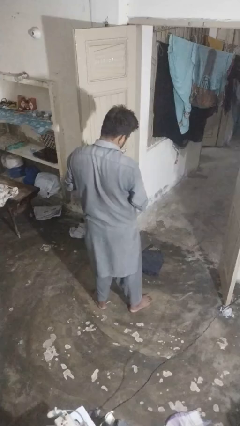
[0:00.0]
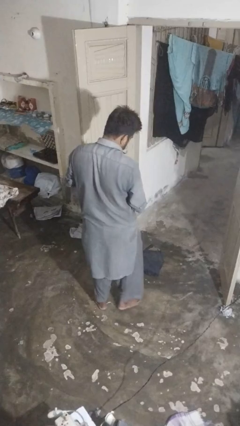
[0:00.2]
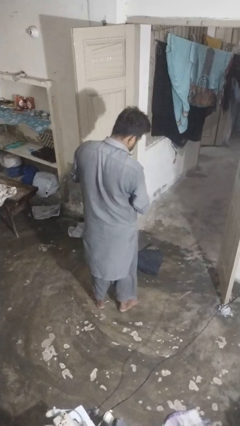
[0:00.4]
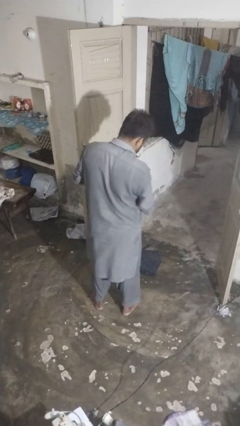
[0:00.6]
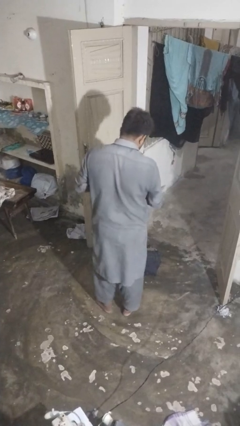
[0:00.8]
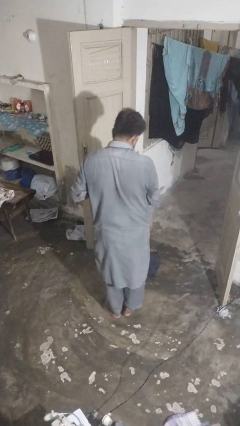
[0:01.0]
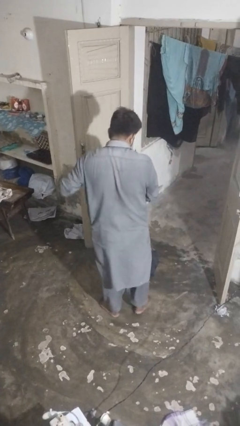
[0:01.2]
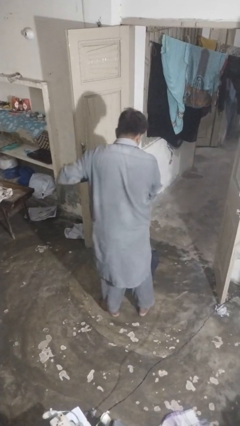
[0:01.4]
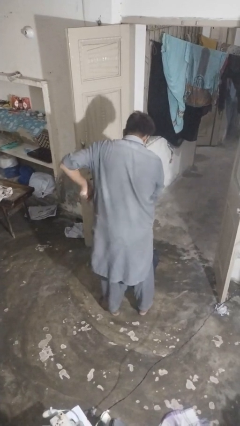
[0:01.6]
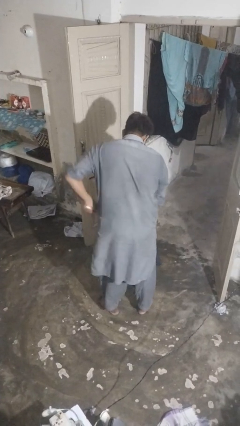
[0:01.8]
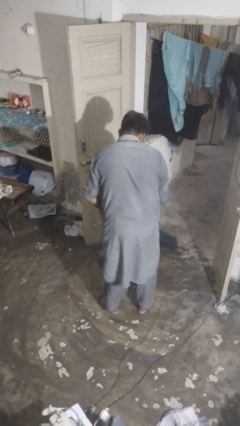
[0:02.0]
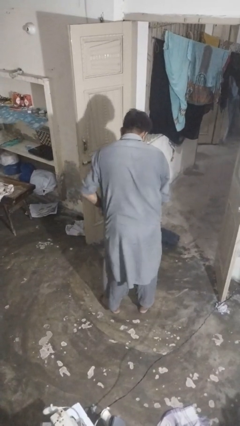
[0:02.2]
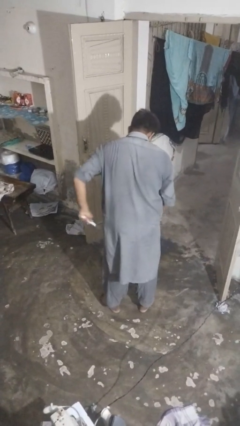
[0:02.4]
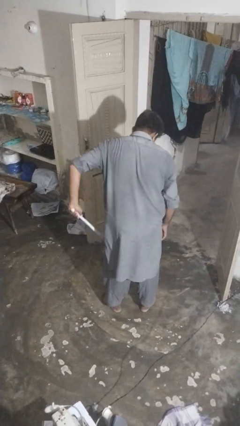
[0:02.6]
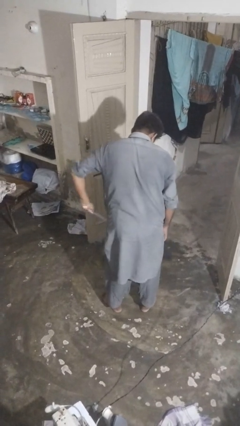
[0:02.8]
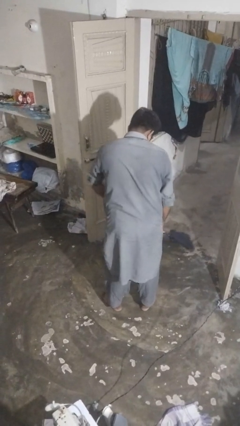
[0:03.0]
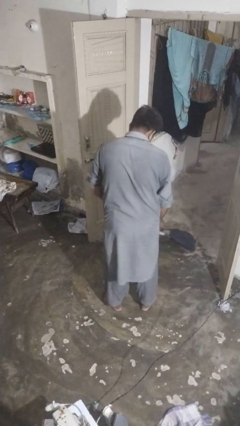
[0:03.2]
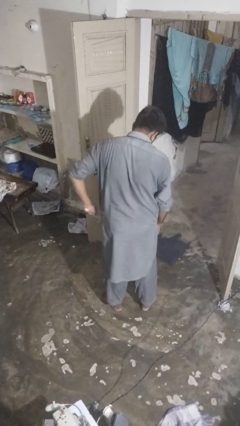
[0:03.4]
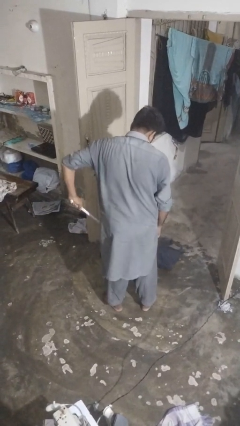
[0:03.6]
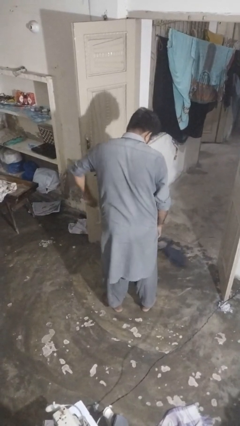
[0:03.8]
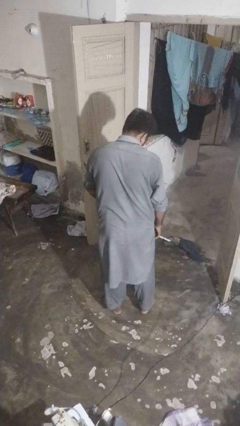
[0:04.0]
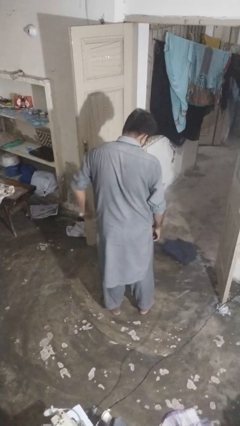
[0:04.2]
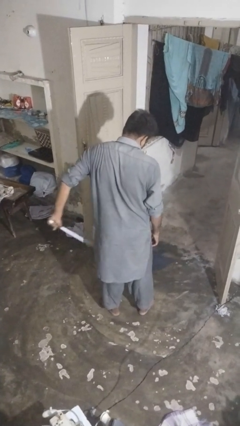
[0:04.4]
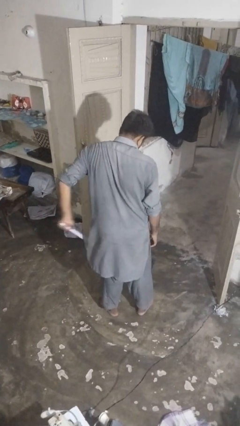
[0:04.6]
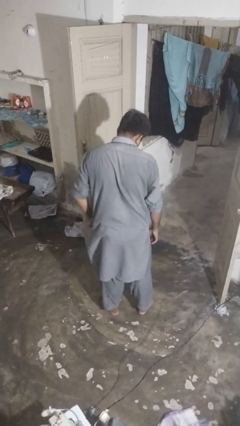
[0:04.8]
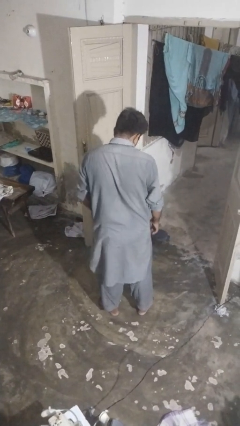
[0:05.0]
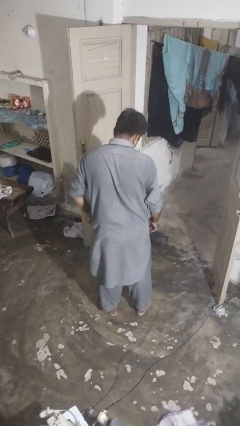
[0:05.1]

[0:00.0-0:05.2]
person mops

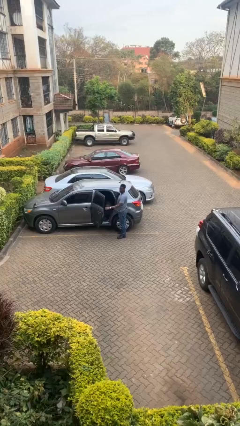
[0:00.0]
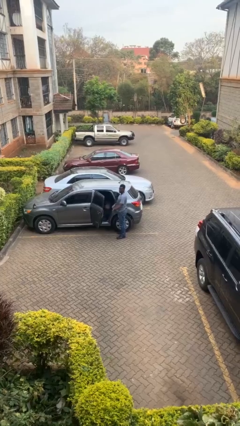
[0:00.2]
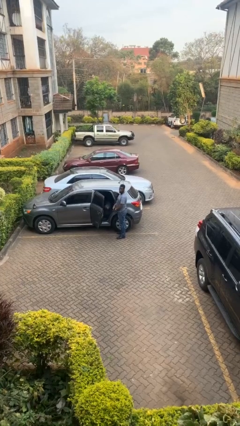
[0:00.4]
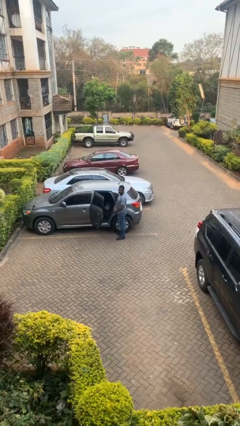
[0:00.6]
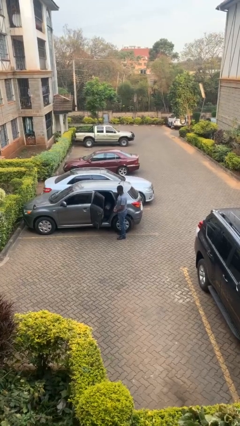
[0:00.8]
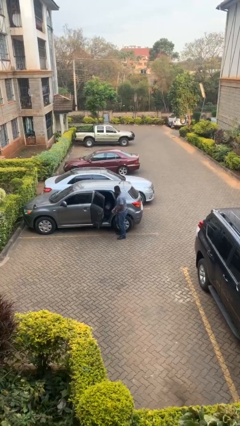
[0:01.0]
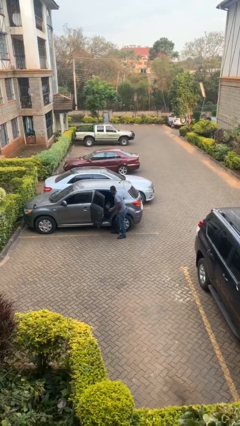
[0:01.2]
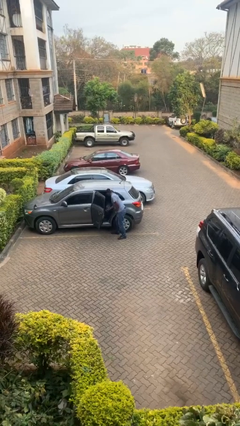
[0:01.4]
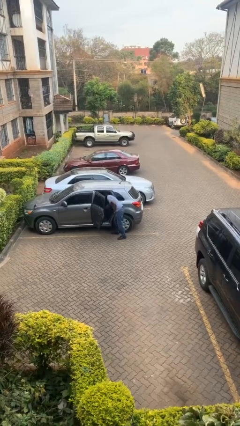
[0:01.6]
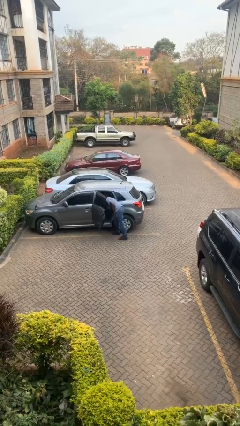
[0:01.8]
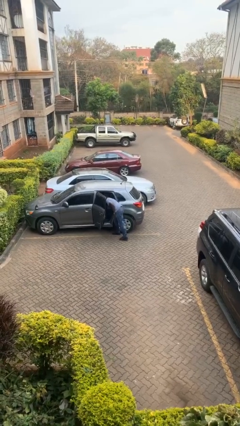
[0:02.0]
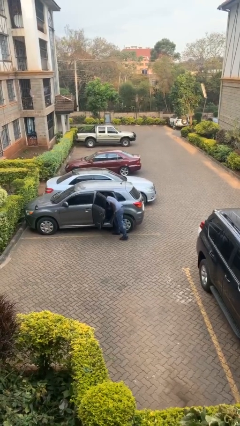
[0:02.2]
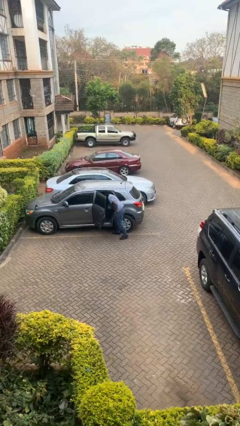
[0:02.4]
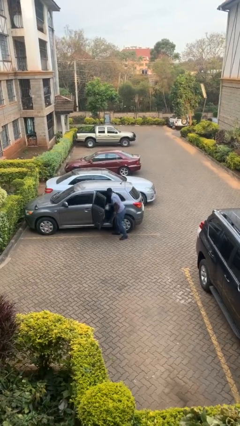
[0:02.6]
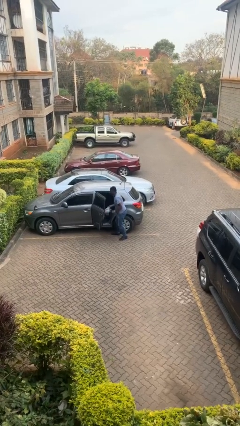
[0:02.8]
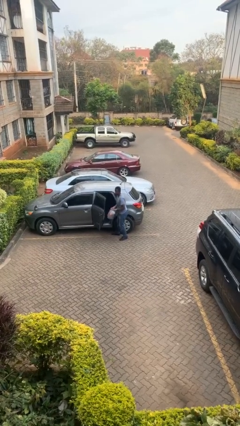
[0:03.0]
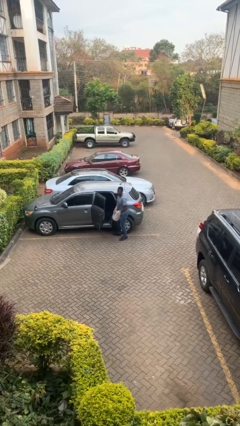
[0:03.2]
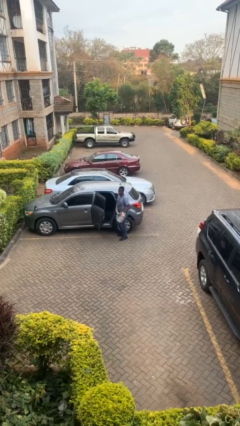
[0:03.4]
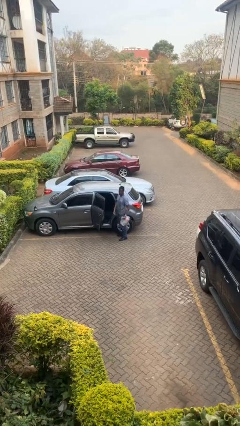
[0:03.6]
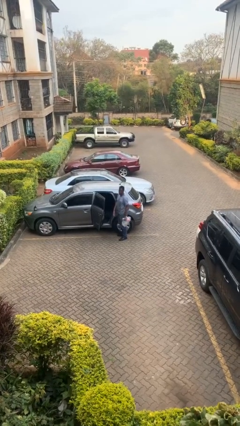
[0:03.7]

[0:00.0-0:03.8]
person unloads car

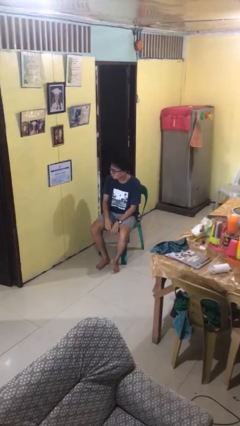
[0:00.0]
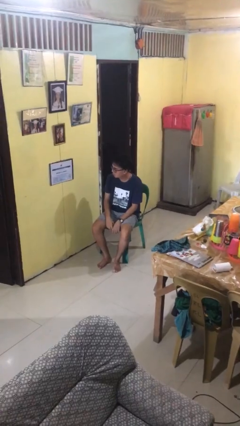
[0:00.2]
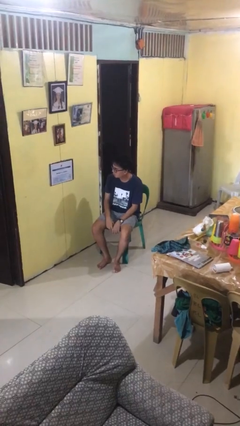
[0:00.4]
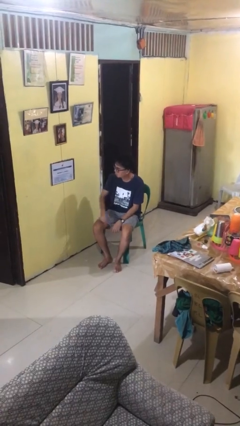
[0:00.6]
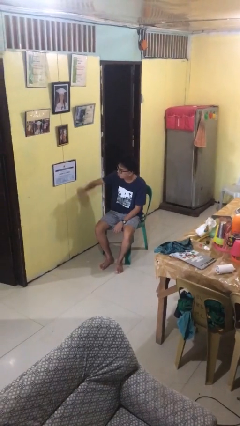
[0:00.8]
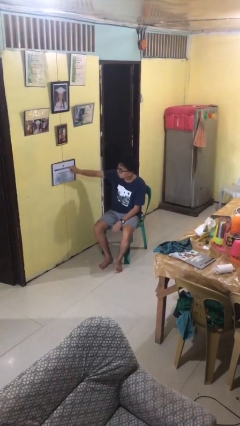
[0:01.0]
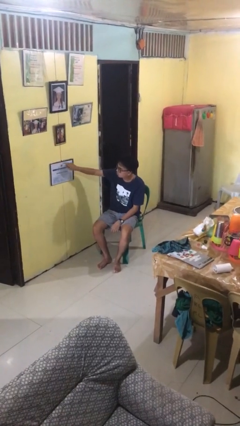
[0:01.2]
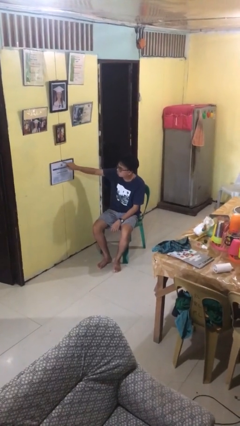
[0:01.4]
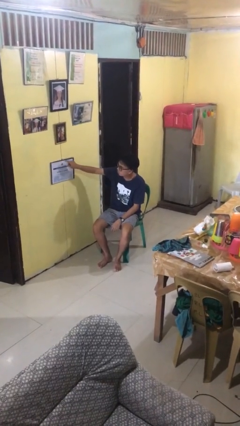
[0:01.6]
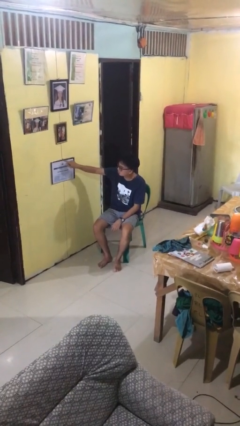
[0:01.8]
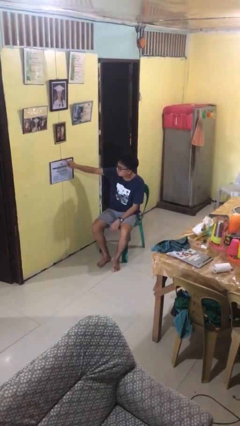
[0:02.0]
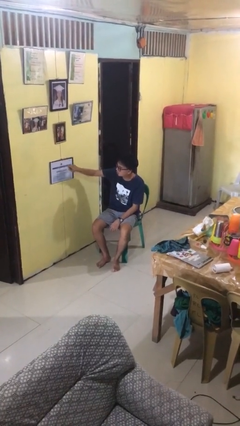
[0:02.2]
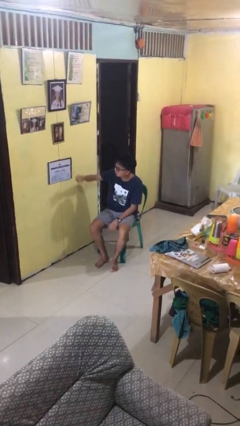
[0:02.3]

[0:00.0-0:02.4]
person taps object with finger

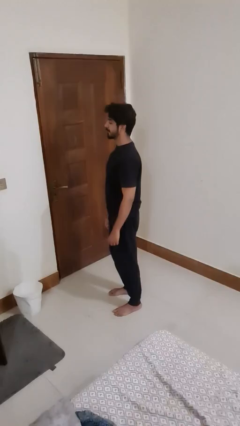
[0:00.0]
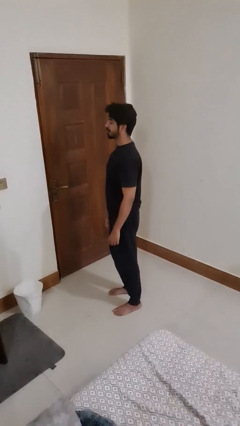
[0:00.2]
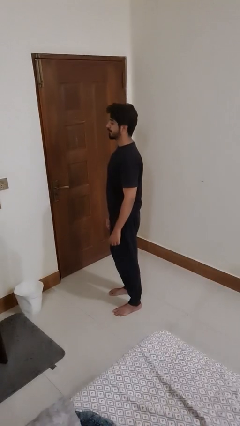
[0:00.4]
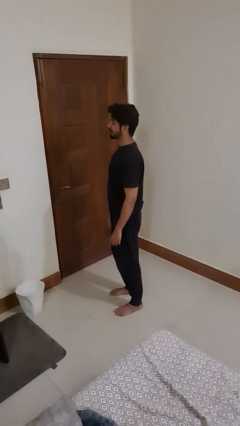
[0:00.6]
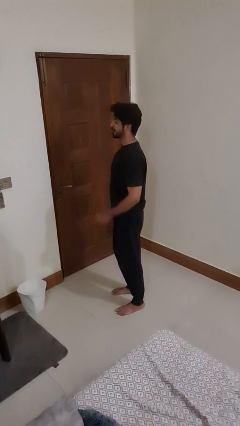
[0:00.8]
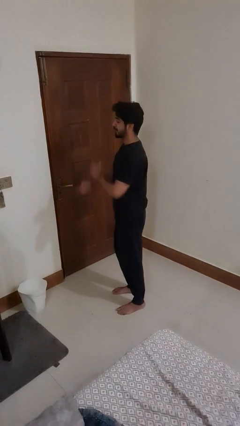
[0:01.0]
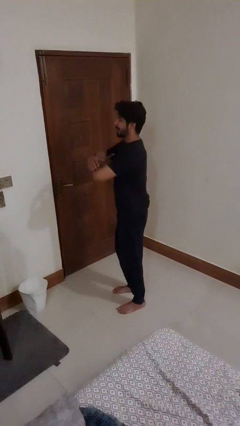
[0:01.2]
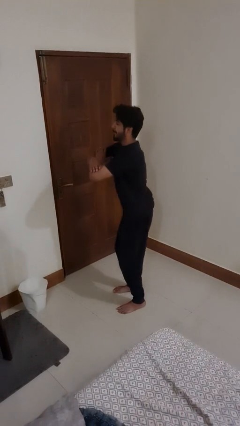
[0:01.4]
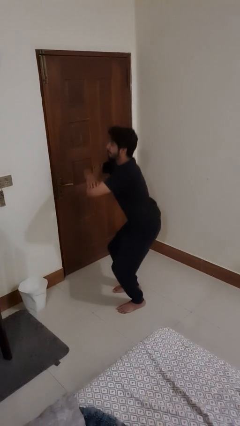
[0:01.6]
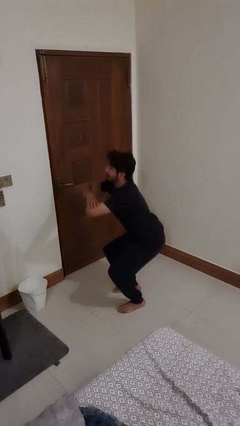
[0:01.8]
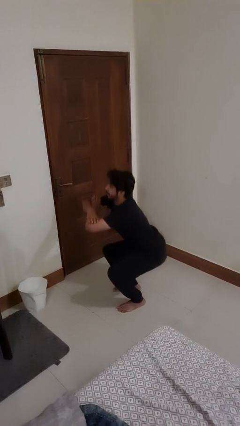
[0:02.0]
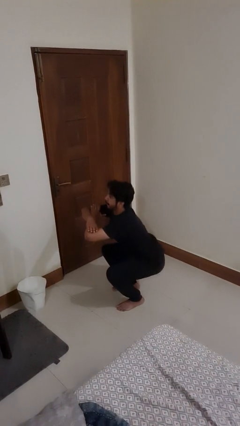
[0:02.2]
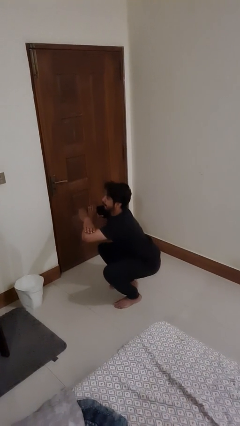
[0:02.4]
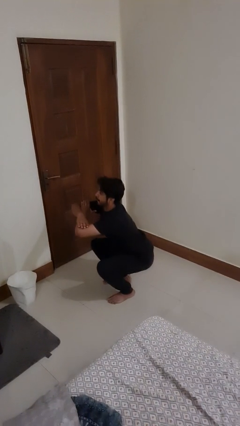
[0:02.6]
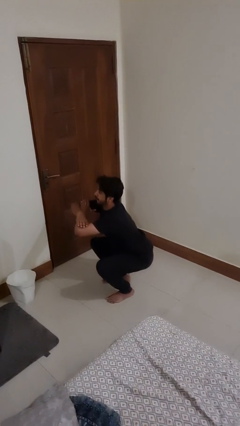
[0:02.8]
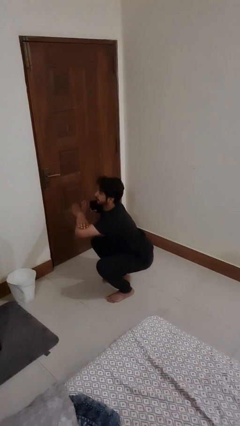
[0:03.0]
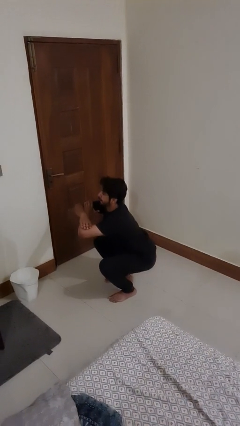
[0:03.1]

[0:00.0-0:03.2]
person squats

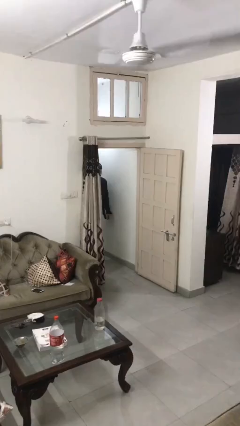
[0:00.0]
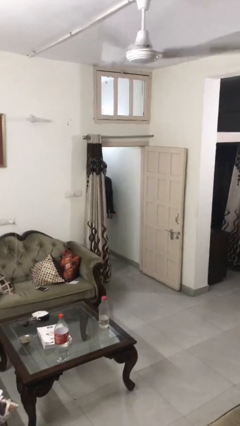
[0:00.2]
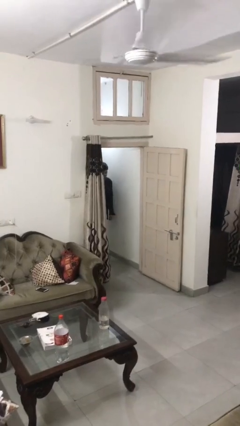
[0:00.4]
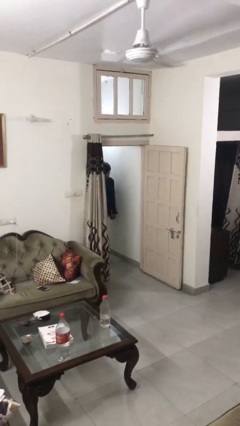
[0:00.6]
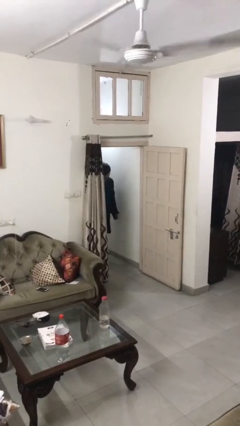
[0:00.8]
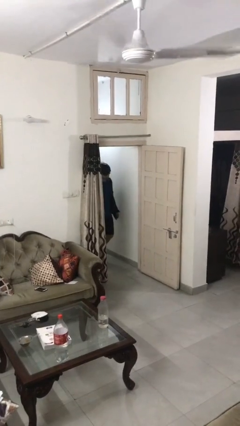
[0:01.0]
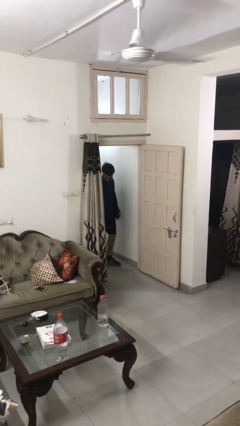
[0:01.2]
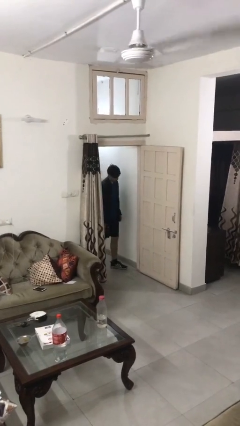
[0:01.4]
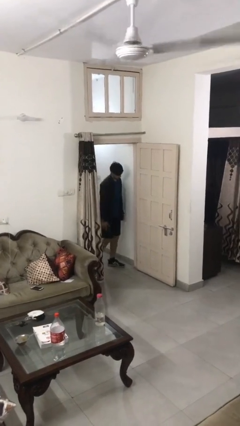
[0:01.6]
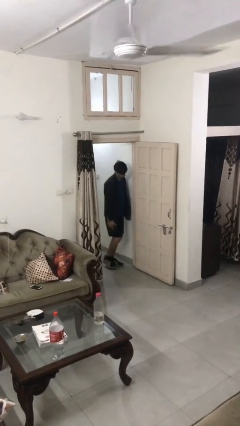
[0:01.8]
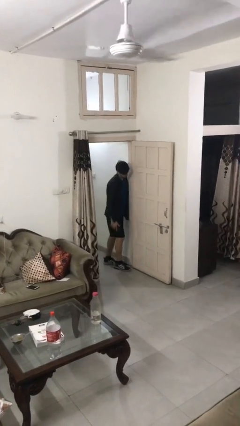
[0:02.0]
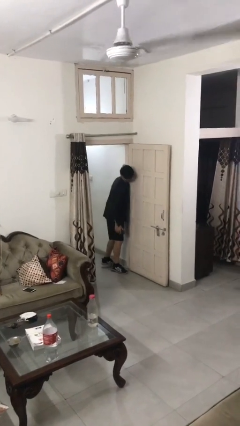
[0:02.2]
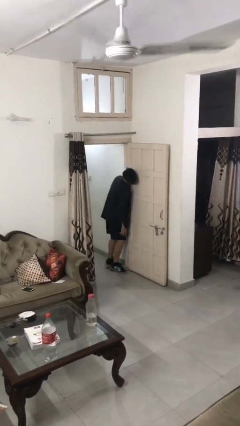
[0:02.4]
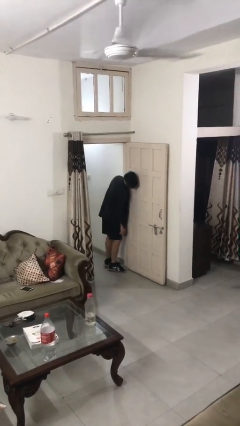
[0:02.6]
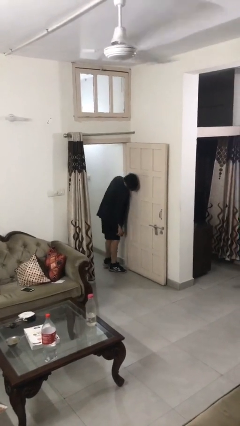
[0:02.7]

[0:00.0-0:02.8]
person bumps into wall
